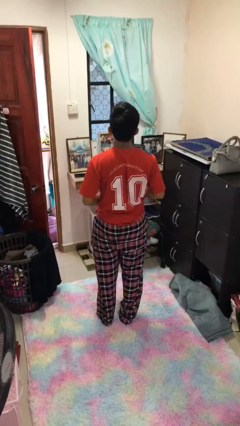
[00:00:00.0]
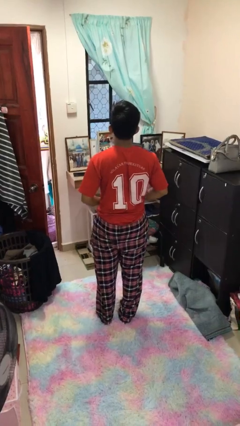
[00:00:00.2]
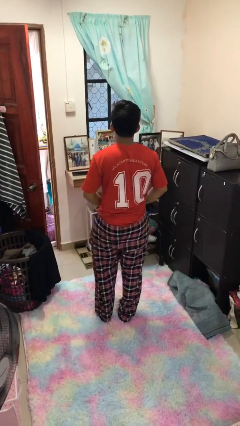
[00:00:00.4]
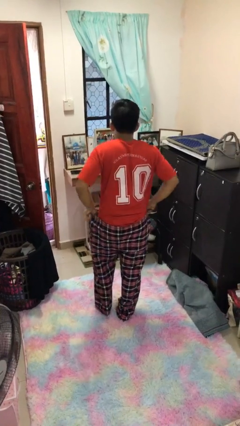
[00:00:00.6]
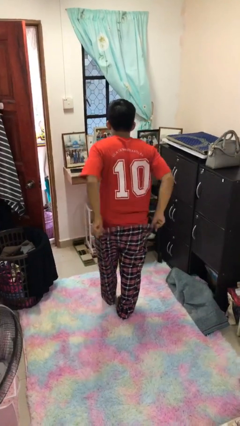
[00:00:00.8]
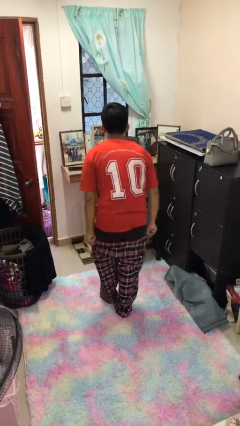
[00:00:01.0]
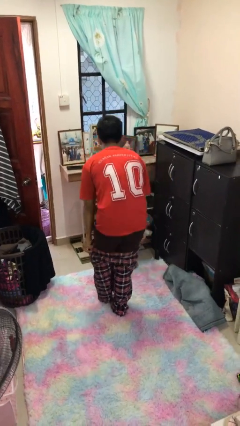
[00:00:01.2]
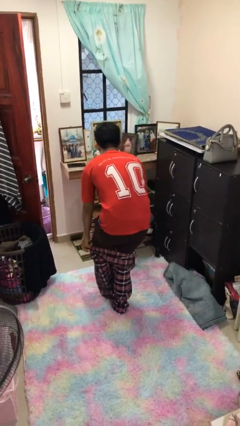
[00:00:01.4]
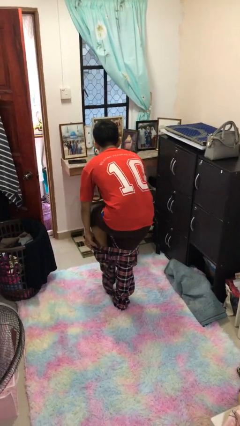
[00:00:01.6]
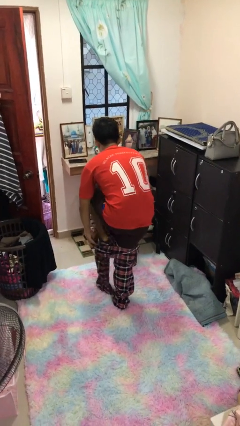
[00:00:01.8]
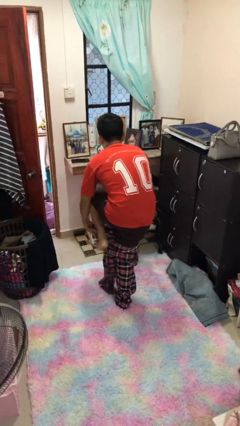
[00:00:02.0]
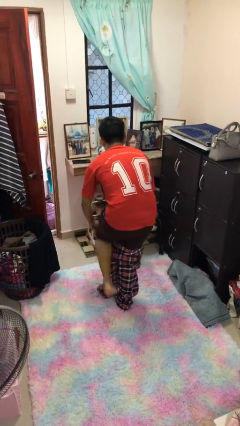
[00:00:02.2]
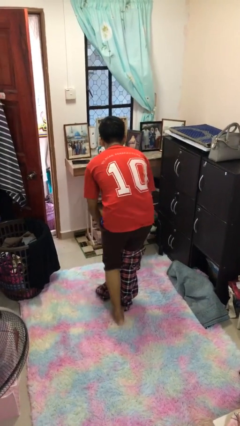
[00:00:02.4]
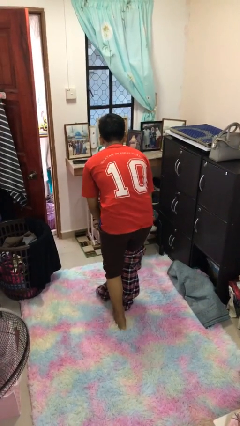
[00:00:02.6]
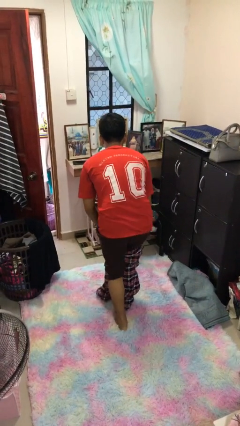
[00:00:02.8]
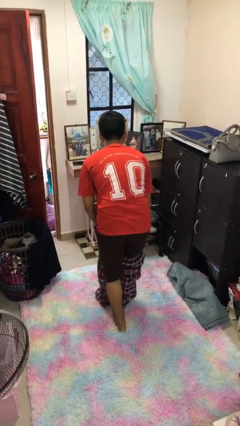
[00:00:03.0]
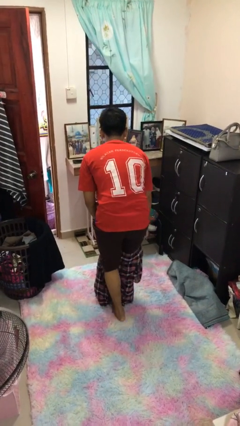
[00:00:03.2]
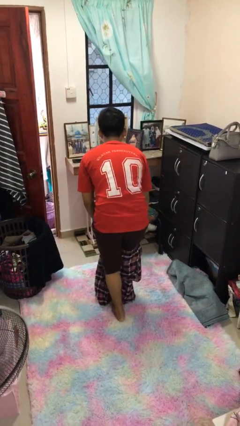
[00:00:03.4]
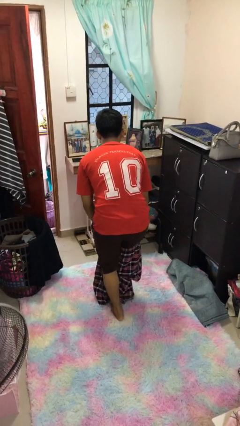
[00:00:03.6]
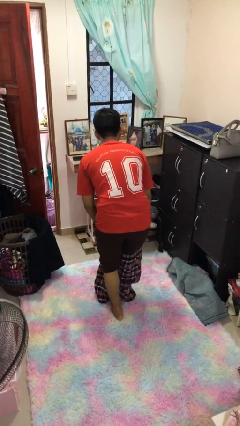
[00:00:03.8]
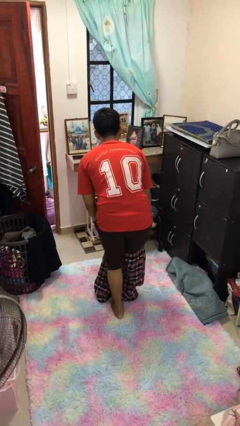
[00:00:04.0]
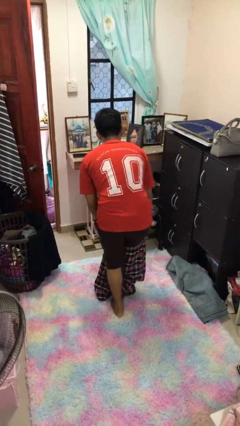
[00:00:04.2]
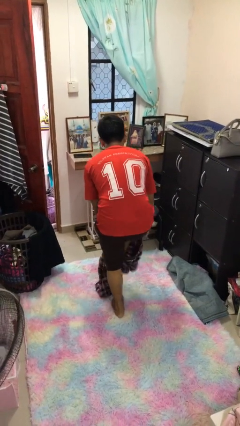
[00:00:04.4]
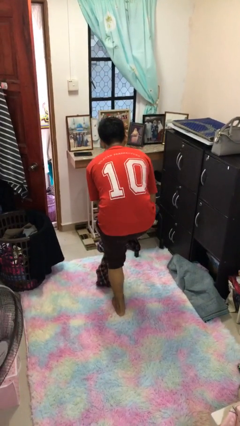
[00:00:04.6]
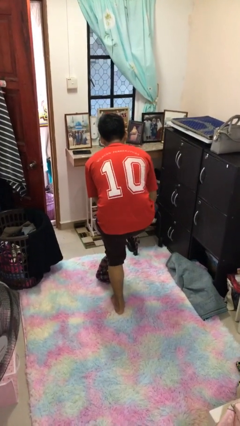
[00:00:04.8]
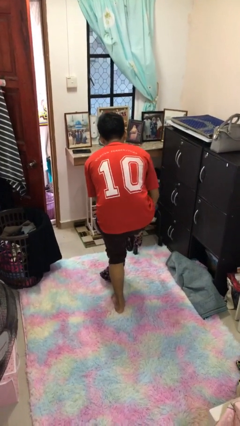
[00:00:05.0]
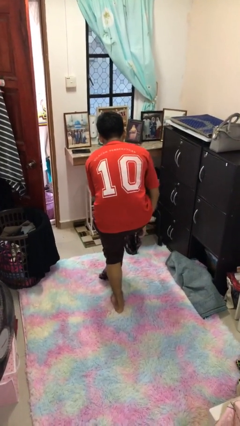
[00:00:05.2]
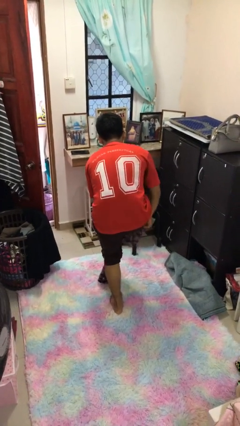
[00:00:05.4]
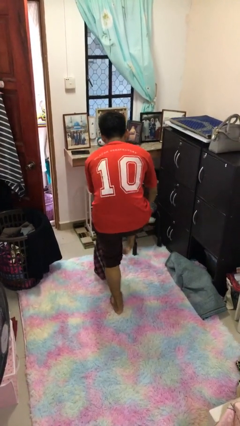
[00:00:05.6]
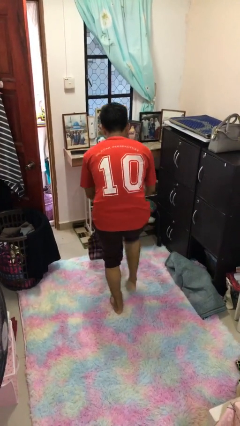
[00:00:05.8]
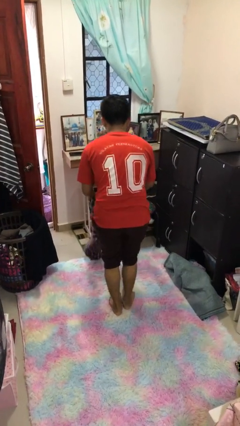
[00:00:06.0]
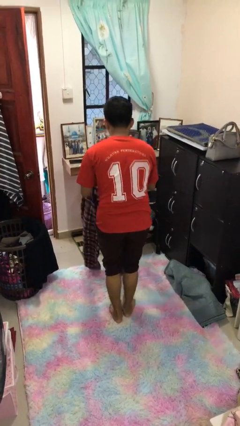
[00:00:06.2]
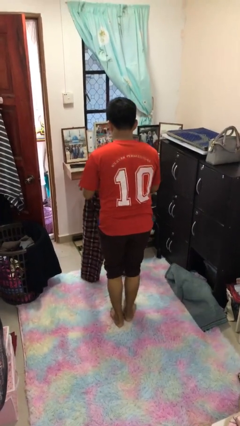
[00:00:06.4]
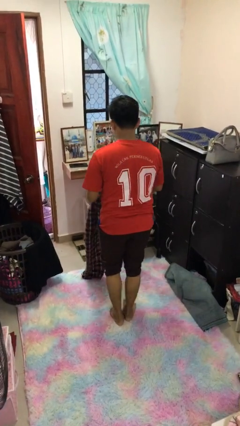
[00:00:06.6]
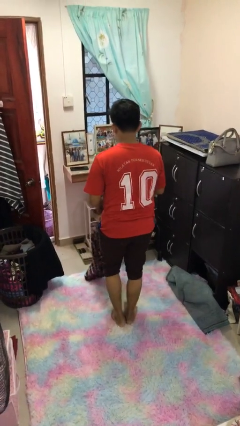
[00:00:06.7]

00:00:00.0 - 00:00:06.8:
person takes off pants

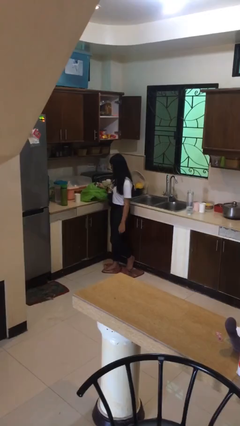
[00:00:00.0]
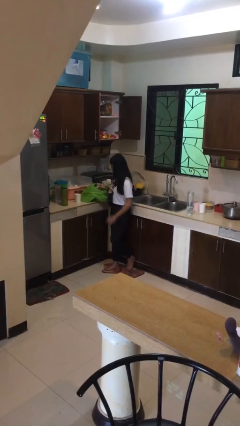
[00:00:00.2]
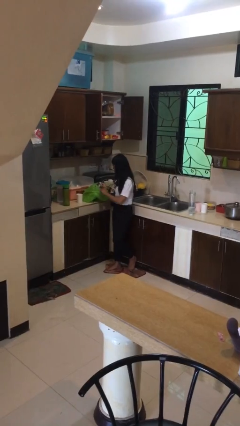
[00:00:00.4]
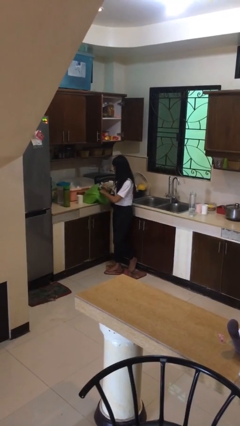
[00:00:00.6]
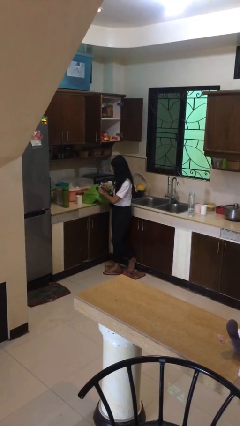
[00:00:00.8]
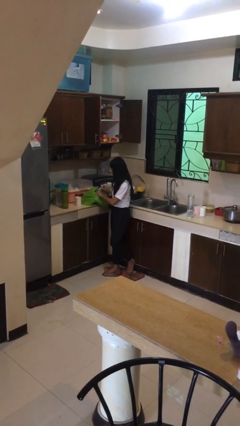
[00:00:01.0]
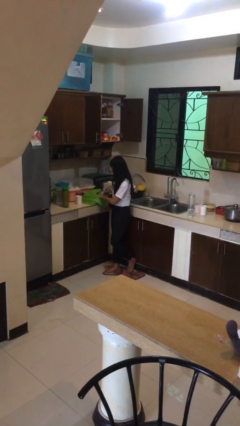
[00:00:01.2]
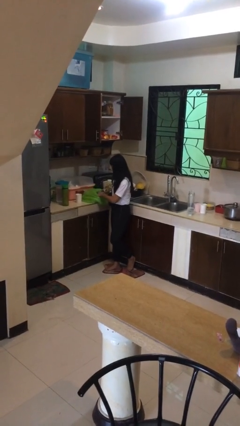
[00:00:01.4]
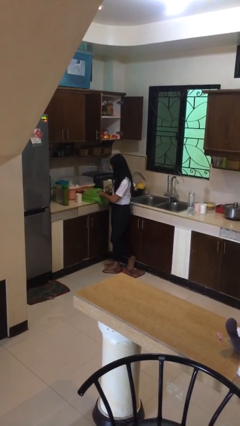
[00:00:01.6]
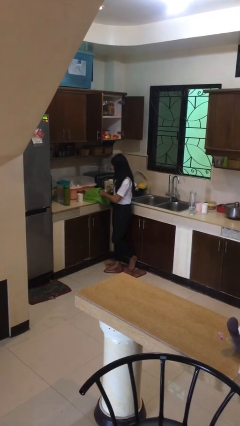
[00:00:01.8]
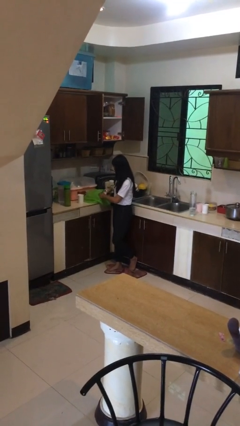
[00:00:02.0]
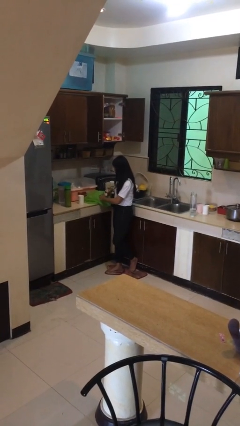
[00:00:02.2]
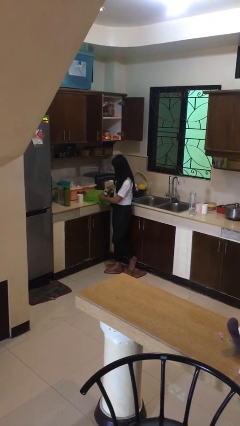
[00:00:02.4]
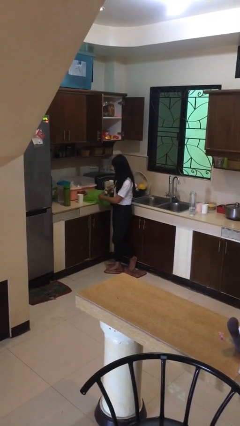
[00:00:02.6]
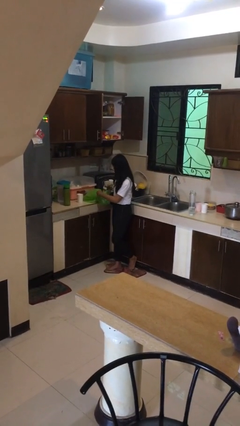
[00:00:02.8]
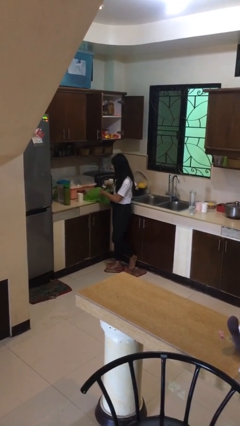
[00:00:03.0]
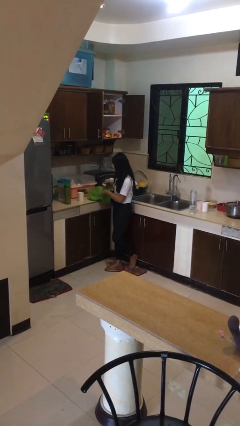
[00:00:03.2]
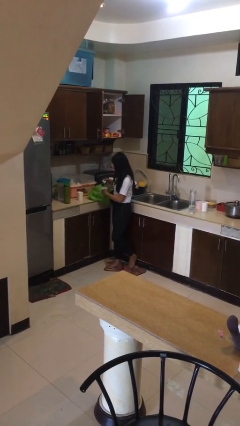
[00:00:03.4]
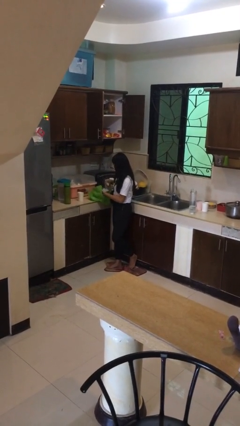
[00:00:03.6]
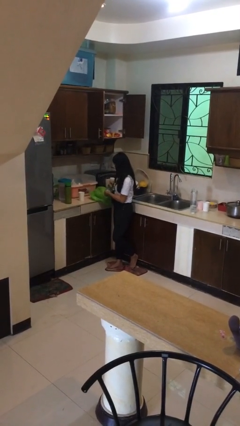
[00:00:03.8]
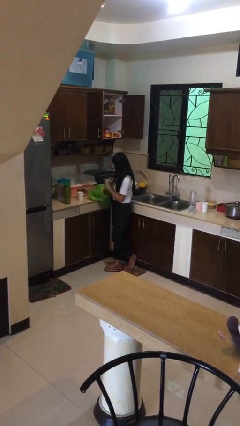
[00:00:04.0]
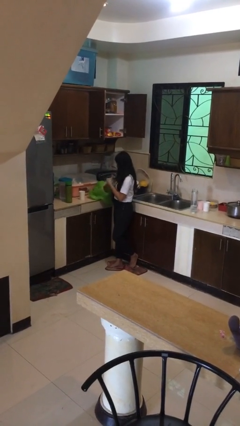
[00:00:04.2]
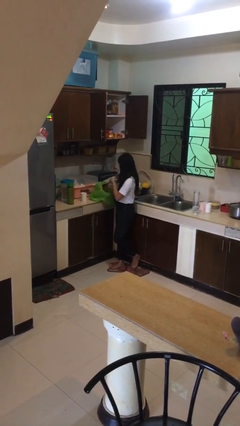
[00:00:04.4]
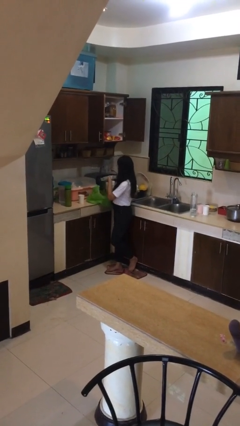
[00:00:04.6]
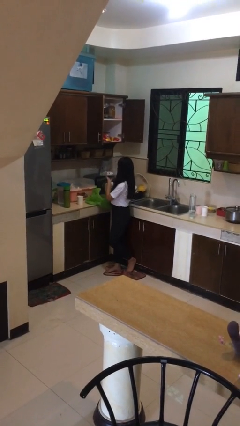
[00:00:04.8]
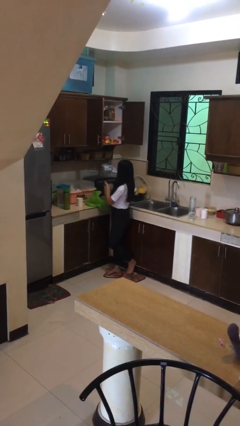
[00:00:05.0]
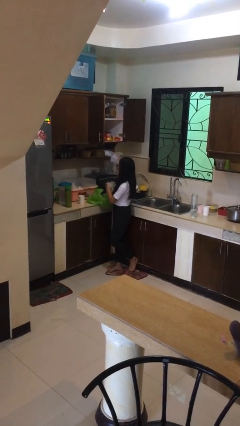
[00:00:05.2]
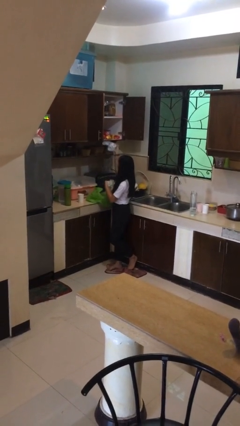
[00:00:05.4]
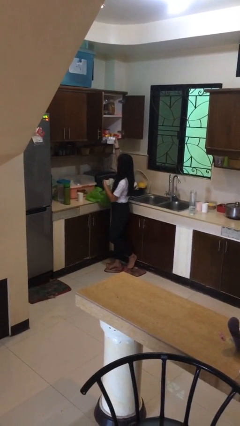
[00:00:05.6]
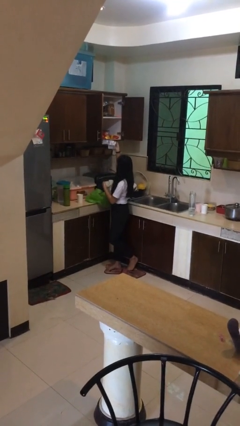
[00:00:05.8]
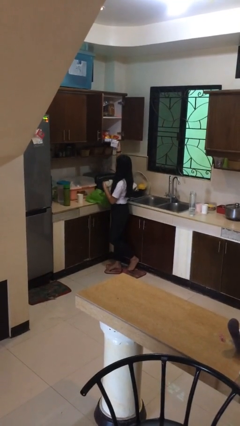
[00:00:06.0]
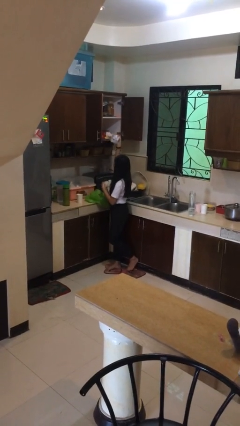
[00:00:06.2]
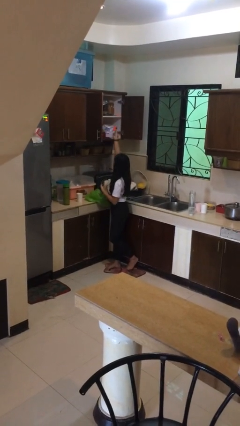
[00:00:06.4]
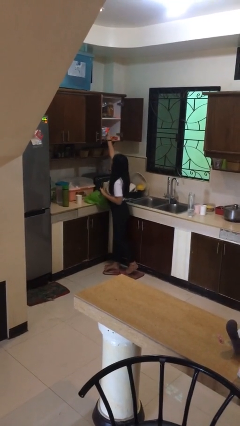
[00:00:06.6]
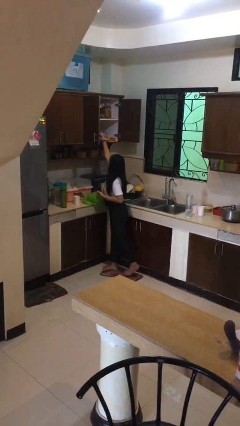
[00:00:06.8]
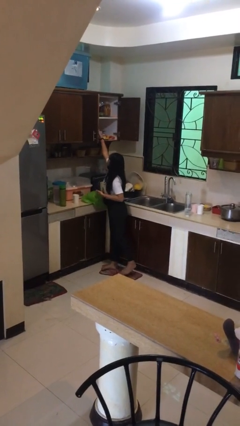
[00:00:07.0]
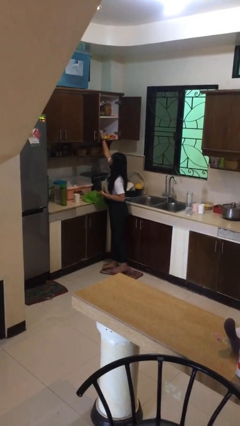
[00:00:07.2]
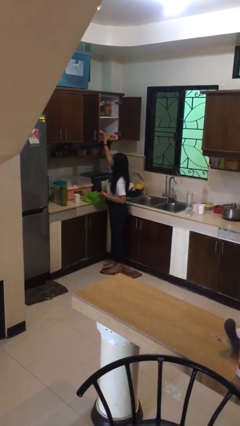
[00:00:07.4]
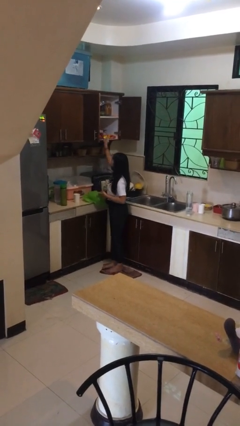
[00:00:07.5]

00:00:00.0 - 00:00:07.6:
person loads groceries into cabinet

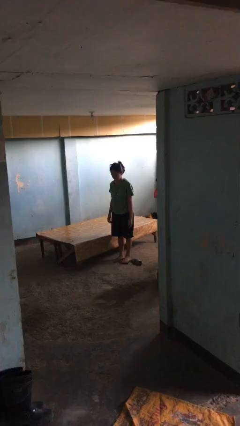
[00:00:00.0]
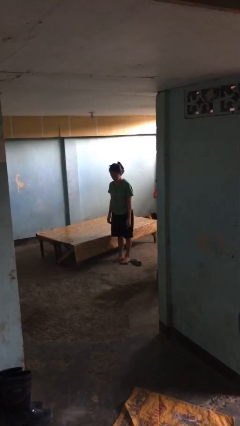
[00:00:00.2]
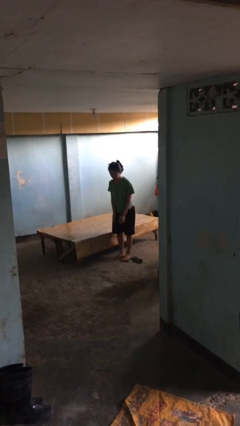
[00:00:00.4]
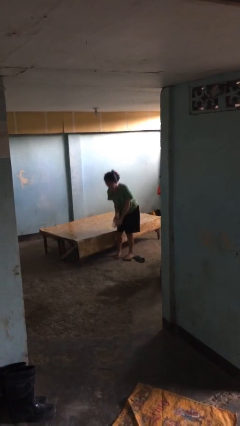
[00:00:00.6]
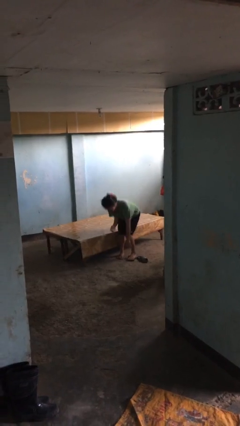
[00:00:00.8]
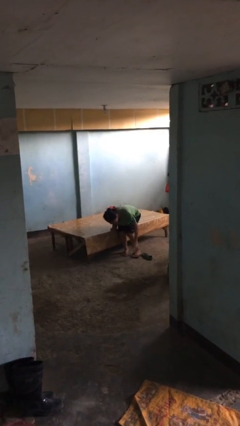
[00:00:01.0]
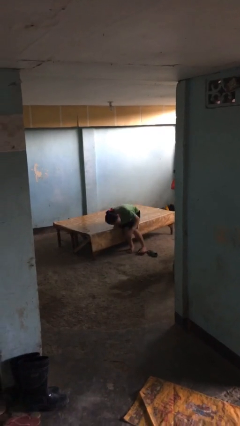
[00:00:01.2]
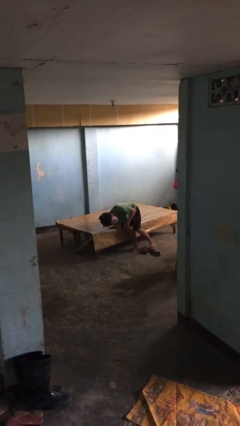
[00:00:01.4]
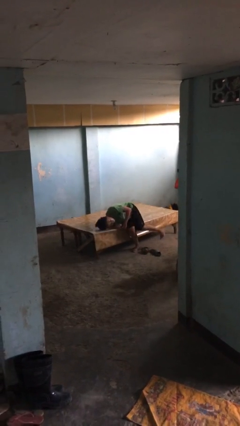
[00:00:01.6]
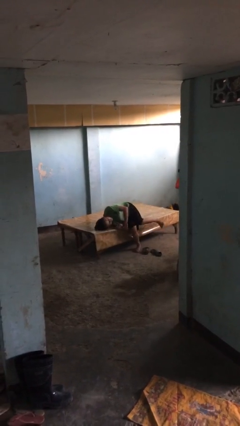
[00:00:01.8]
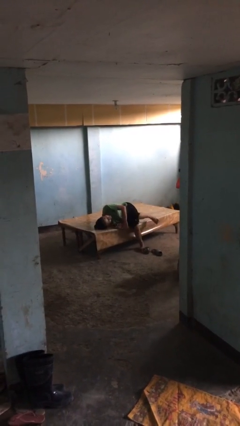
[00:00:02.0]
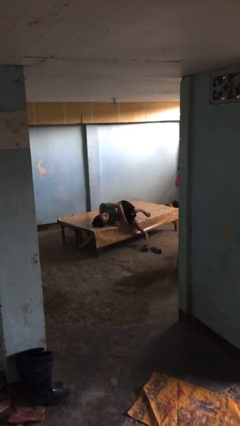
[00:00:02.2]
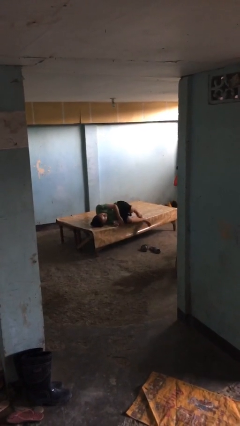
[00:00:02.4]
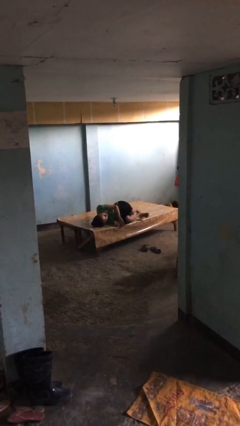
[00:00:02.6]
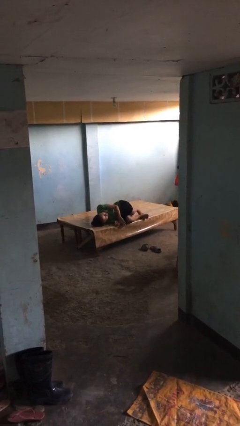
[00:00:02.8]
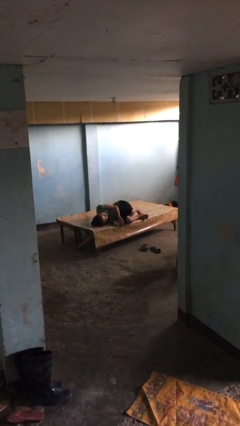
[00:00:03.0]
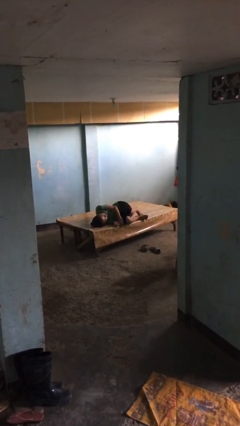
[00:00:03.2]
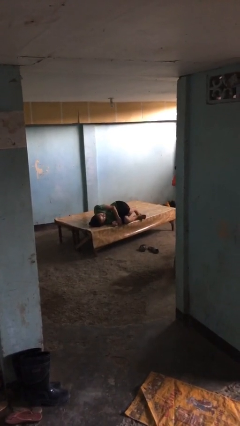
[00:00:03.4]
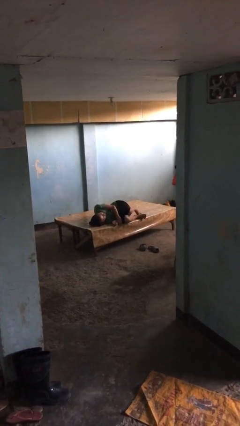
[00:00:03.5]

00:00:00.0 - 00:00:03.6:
person lies down on bed
